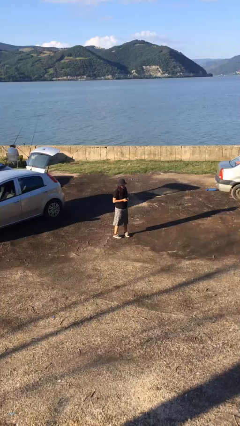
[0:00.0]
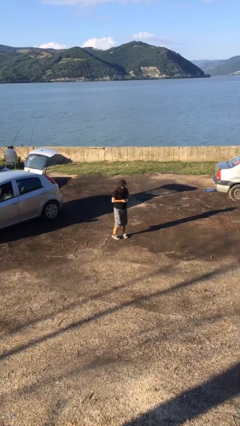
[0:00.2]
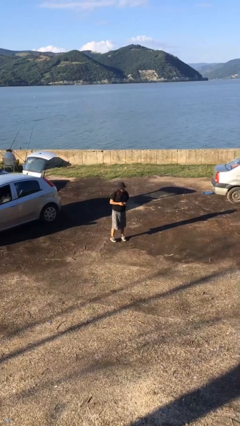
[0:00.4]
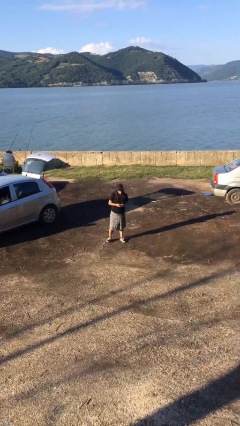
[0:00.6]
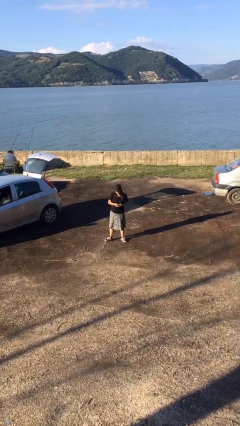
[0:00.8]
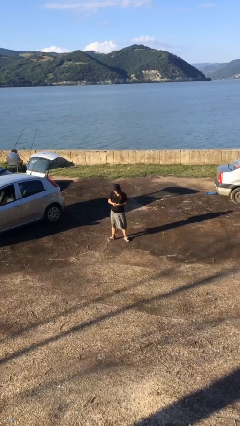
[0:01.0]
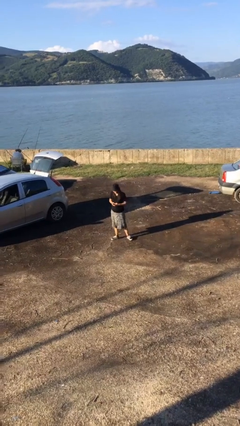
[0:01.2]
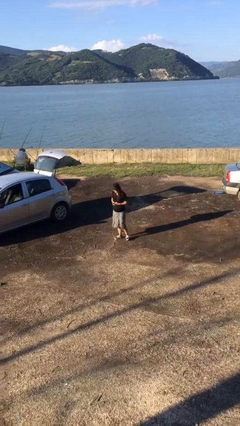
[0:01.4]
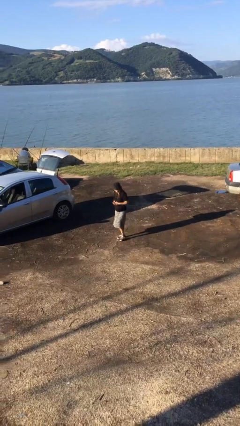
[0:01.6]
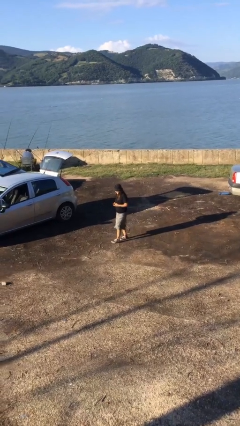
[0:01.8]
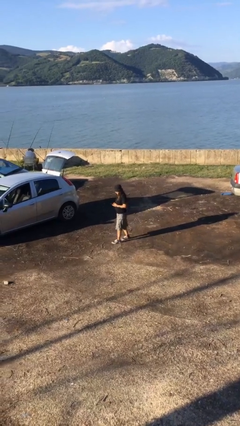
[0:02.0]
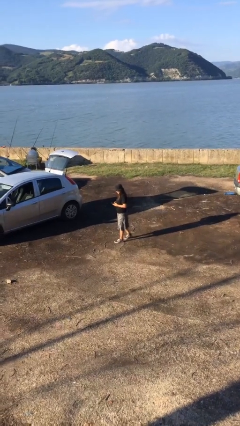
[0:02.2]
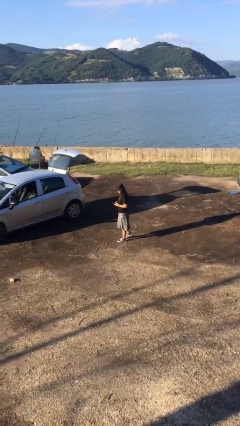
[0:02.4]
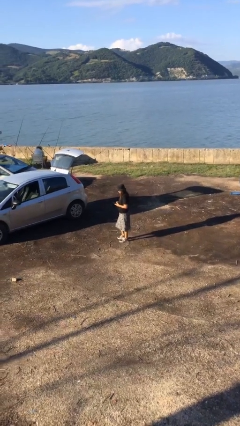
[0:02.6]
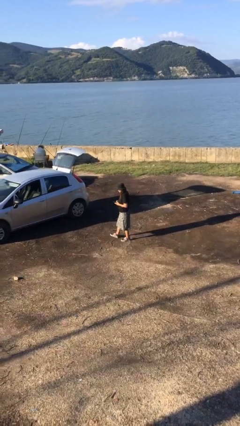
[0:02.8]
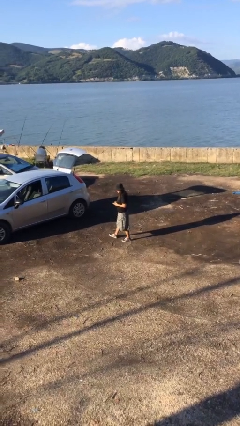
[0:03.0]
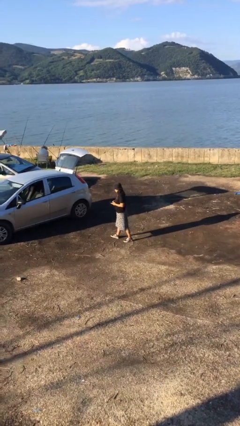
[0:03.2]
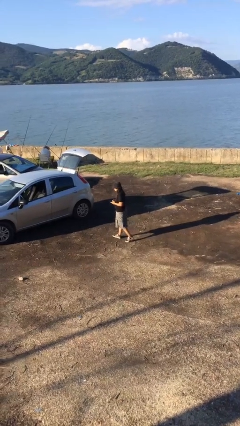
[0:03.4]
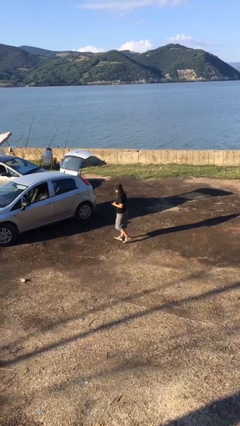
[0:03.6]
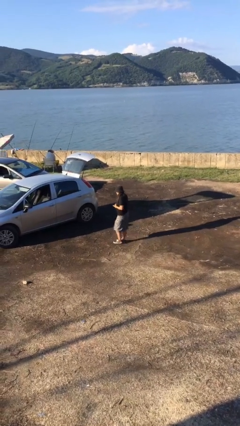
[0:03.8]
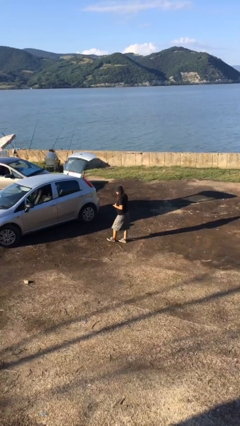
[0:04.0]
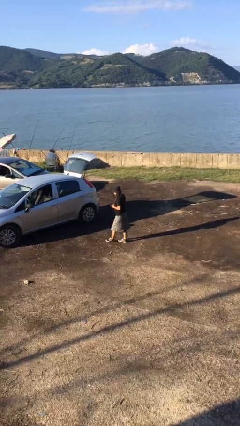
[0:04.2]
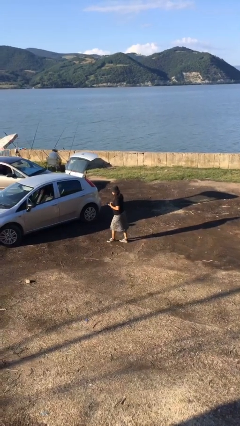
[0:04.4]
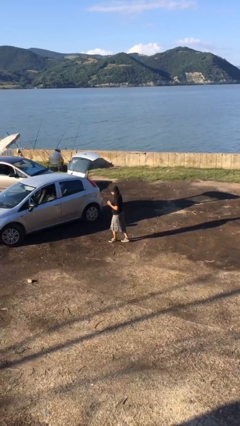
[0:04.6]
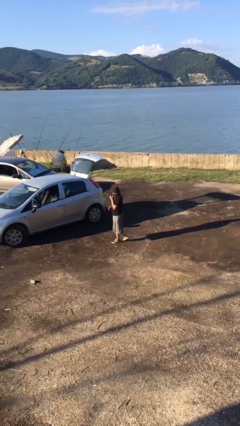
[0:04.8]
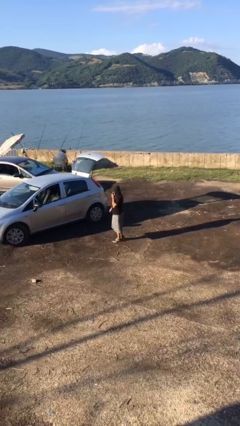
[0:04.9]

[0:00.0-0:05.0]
person texts on phone

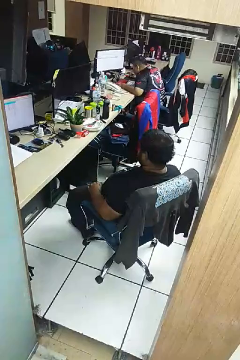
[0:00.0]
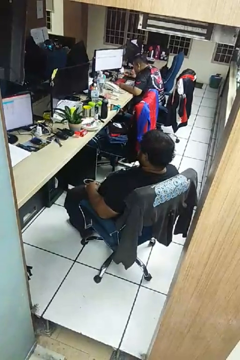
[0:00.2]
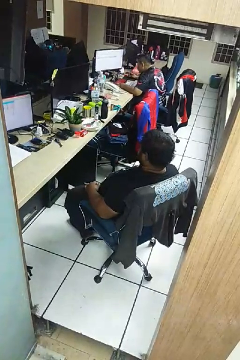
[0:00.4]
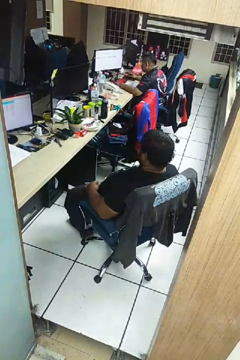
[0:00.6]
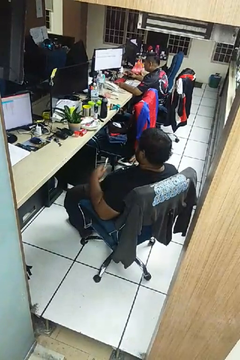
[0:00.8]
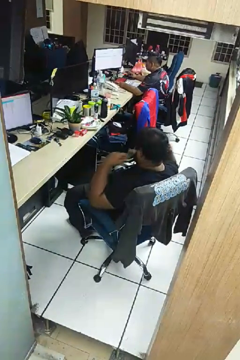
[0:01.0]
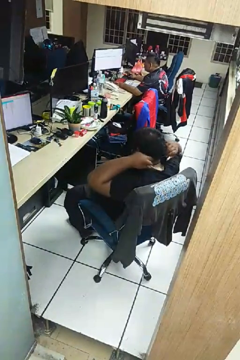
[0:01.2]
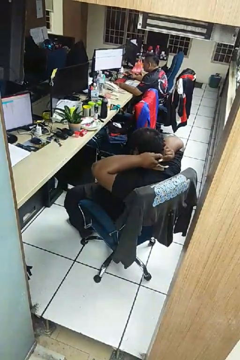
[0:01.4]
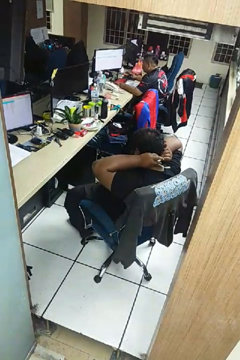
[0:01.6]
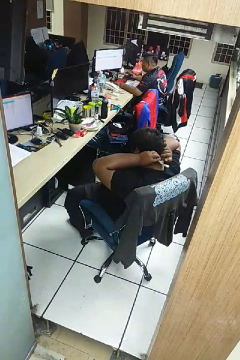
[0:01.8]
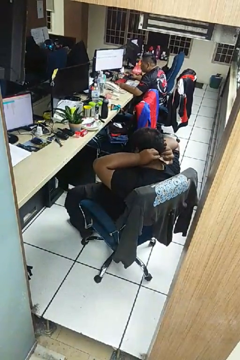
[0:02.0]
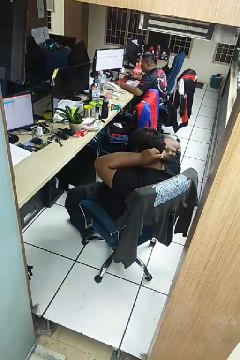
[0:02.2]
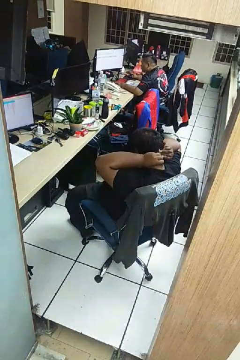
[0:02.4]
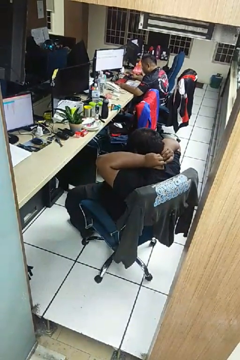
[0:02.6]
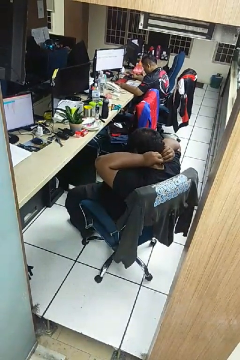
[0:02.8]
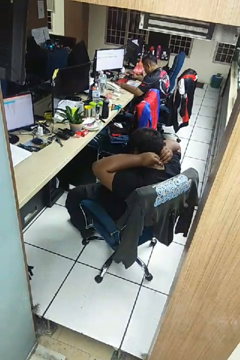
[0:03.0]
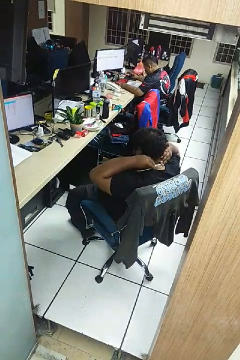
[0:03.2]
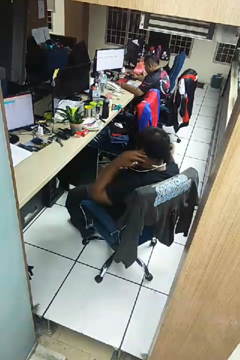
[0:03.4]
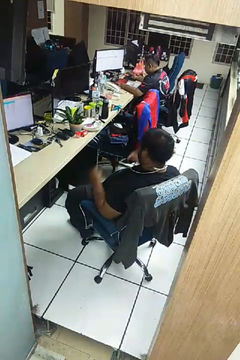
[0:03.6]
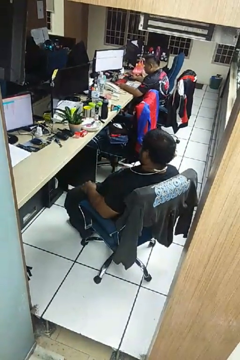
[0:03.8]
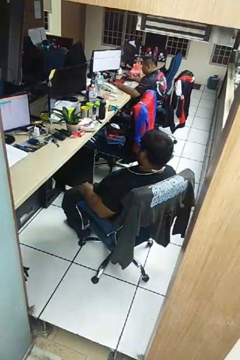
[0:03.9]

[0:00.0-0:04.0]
person puts on necklace

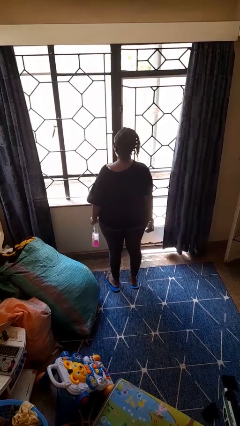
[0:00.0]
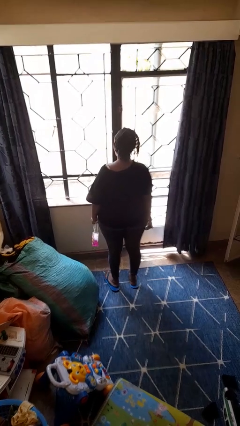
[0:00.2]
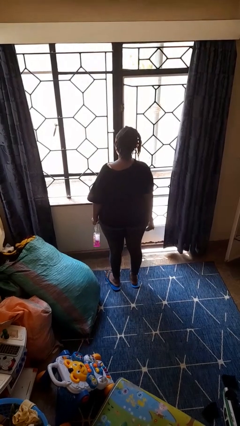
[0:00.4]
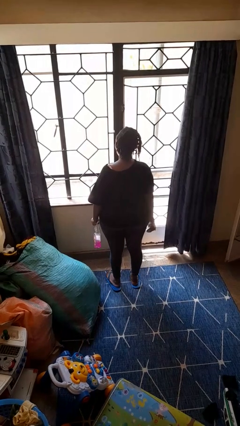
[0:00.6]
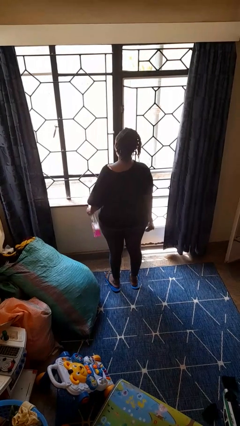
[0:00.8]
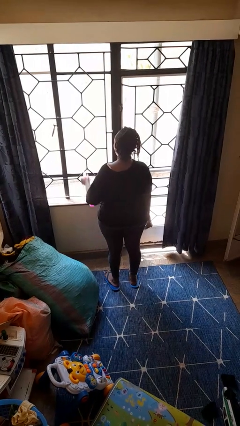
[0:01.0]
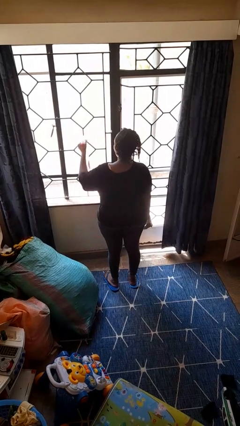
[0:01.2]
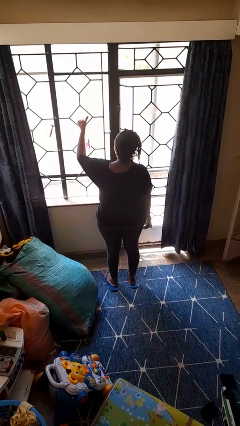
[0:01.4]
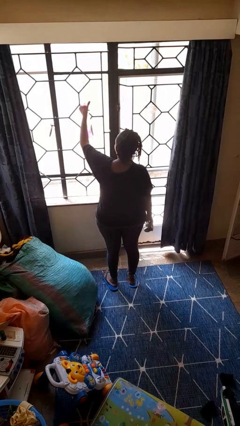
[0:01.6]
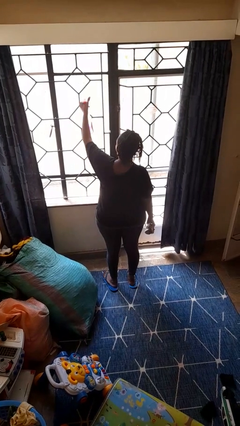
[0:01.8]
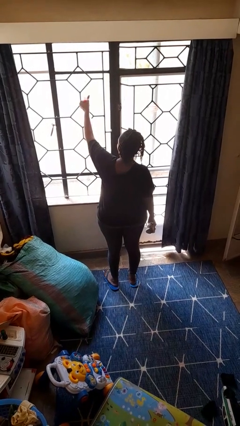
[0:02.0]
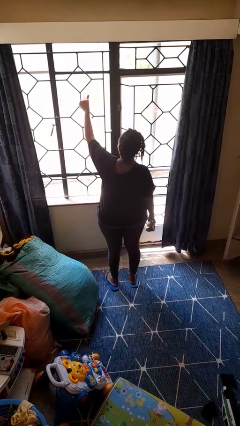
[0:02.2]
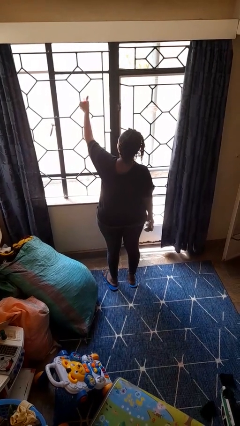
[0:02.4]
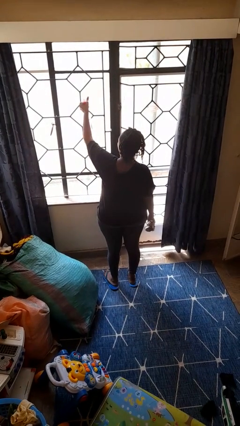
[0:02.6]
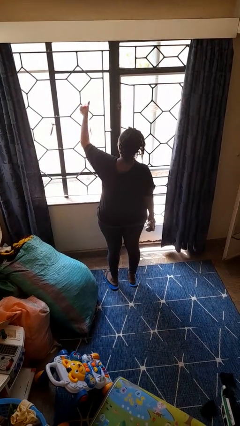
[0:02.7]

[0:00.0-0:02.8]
person sprays from bottle

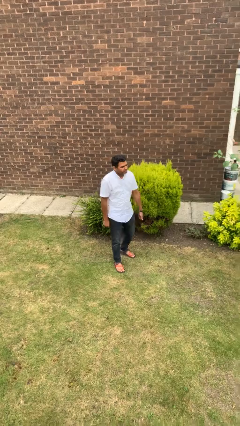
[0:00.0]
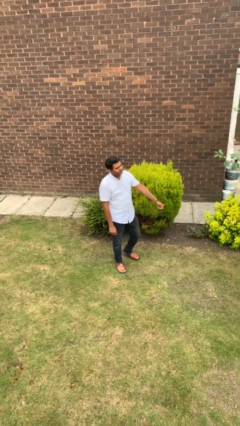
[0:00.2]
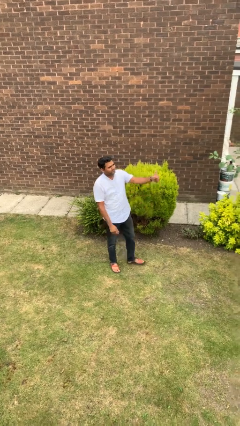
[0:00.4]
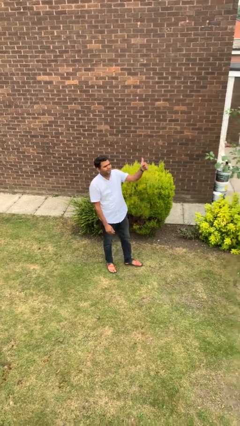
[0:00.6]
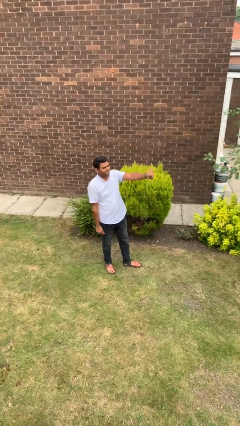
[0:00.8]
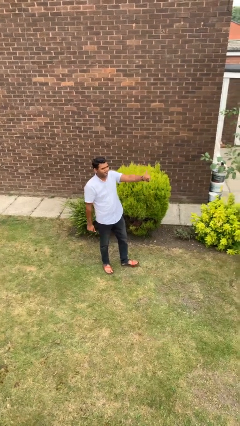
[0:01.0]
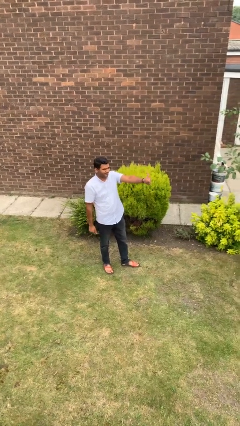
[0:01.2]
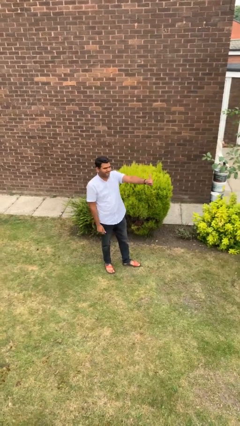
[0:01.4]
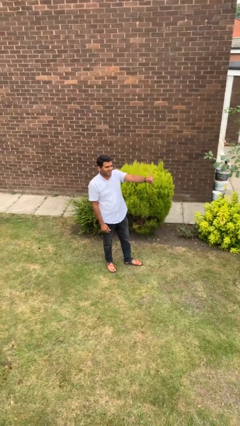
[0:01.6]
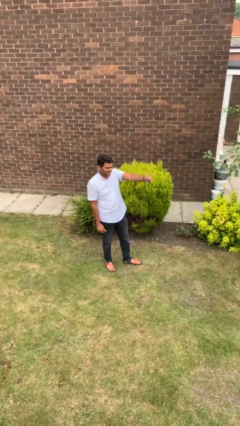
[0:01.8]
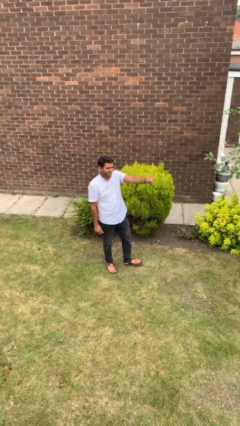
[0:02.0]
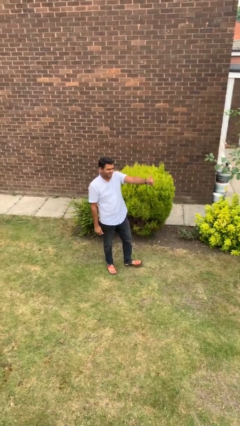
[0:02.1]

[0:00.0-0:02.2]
person gestures thumbs up

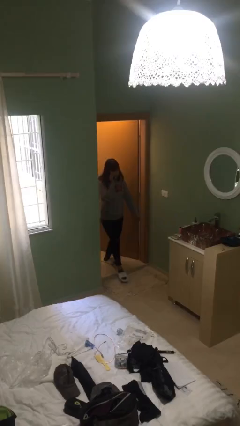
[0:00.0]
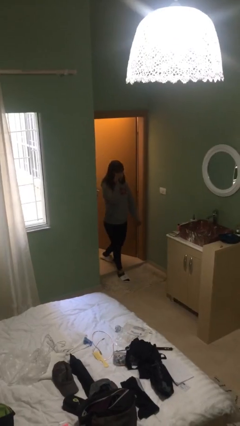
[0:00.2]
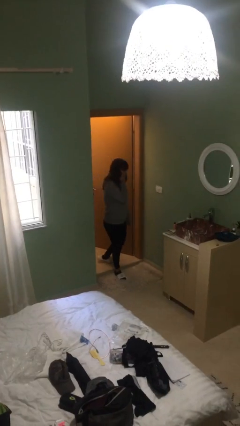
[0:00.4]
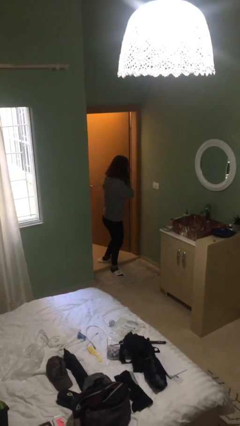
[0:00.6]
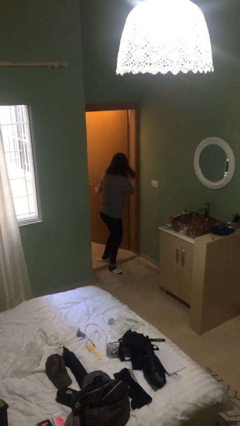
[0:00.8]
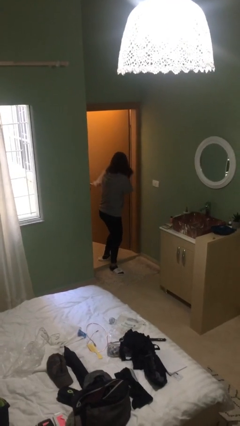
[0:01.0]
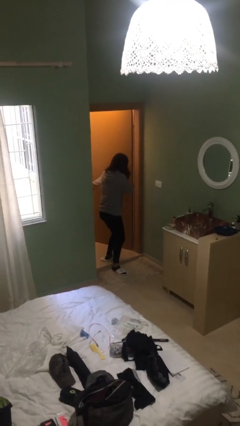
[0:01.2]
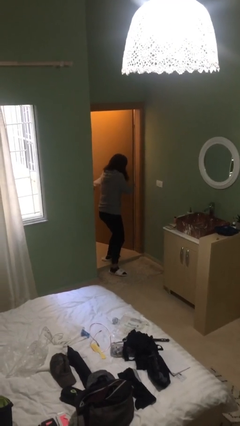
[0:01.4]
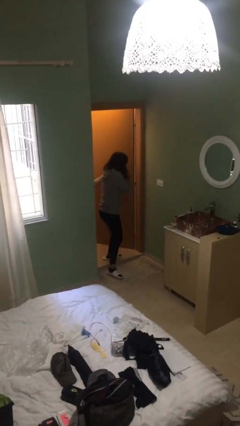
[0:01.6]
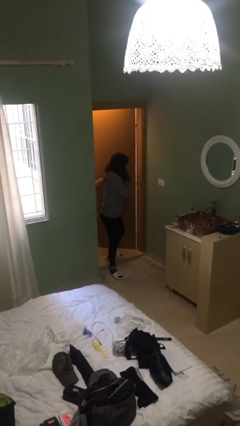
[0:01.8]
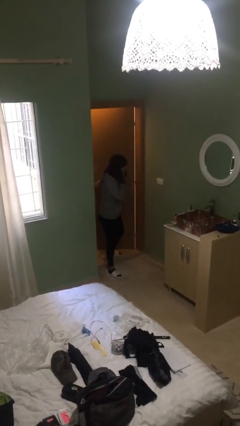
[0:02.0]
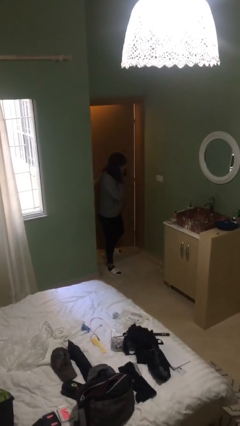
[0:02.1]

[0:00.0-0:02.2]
person enters scene through structure

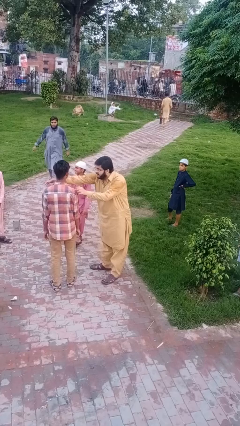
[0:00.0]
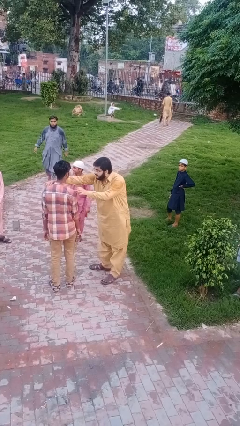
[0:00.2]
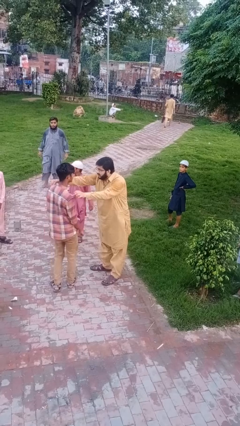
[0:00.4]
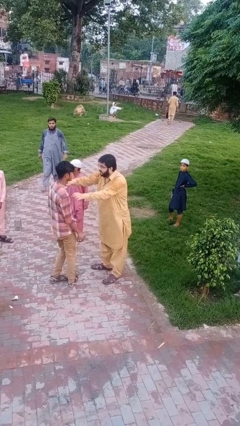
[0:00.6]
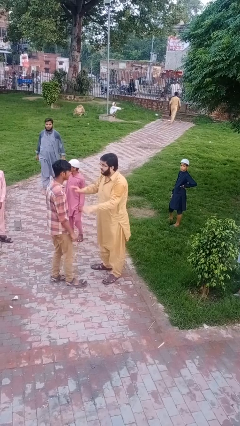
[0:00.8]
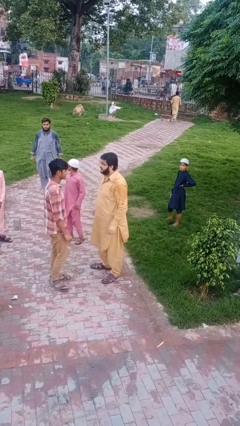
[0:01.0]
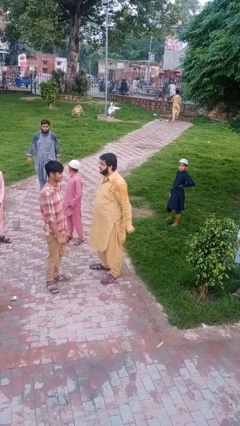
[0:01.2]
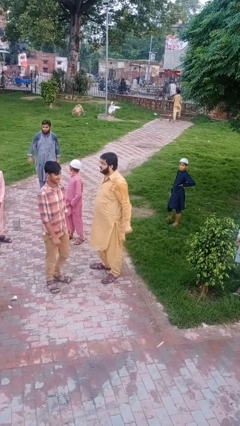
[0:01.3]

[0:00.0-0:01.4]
person spins person around

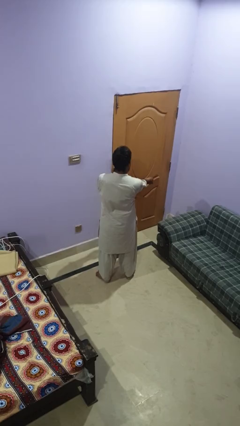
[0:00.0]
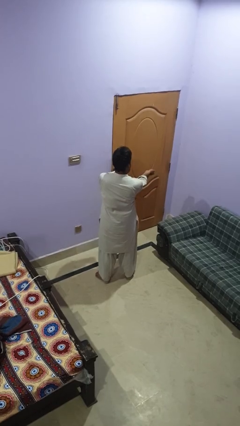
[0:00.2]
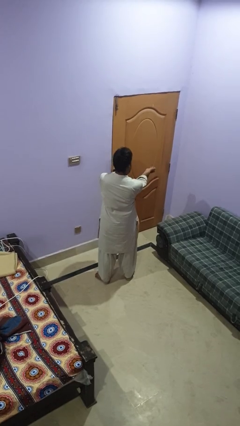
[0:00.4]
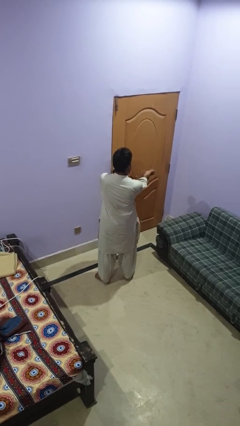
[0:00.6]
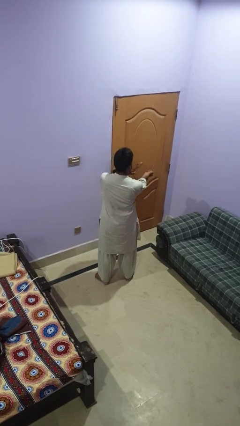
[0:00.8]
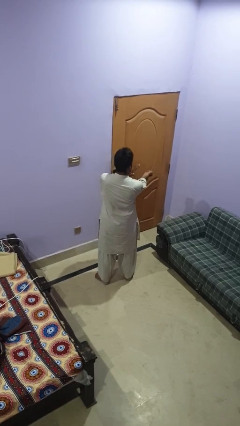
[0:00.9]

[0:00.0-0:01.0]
person swats bug
